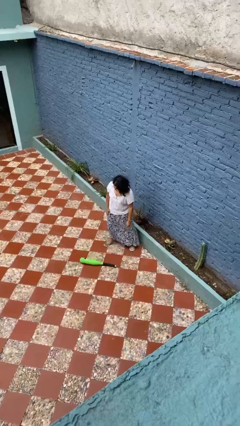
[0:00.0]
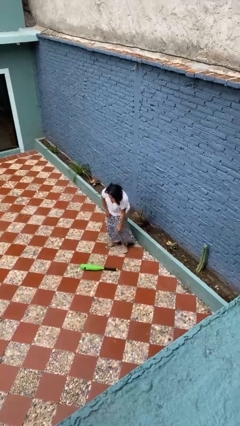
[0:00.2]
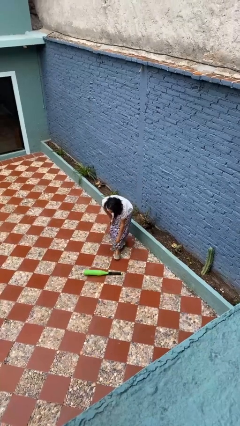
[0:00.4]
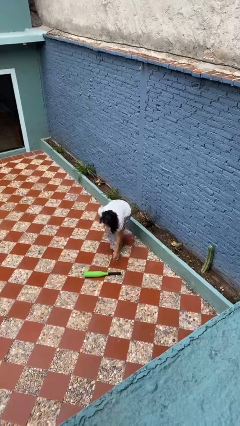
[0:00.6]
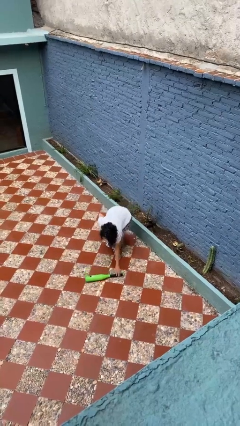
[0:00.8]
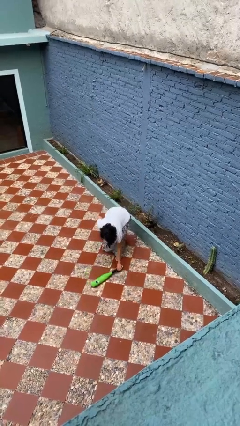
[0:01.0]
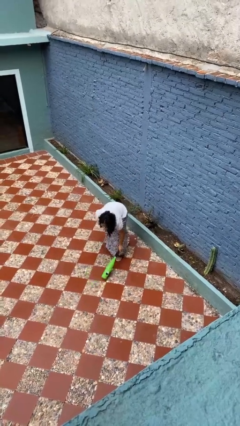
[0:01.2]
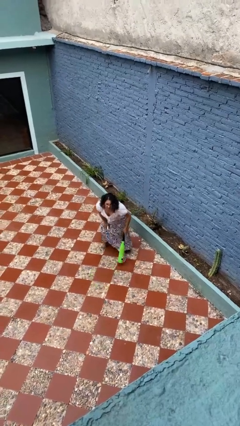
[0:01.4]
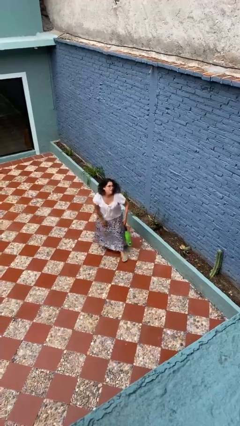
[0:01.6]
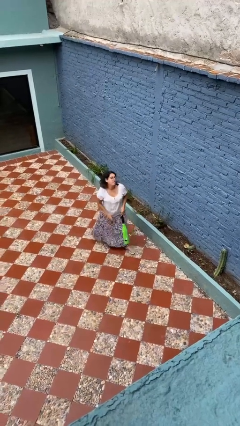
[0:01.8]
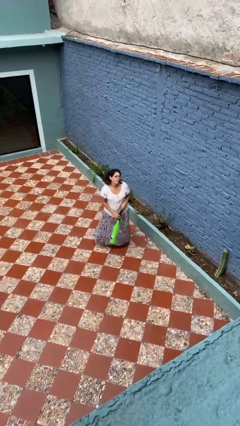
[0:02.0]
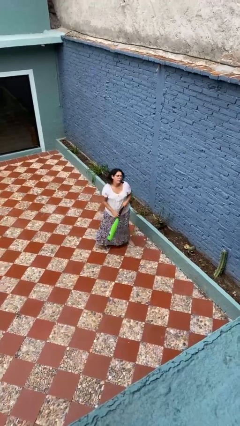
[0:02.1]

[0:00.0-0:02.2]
person picks up object from floor

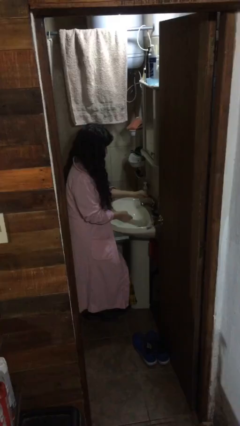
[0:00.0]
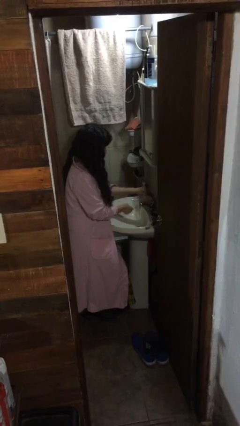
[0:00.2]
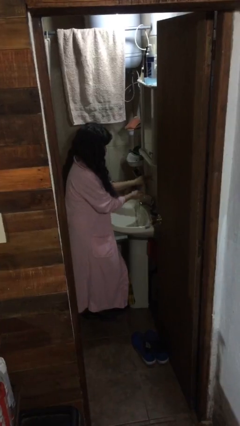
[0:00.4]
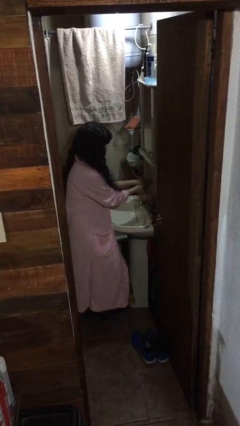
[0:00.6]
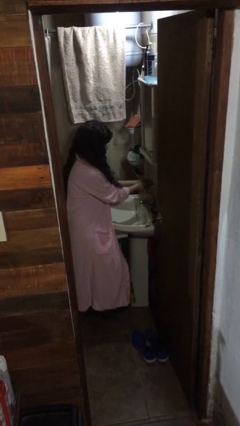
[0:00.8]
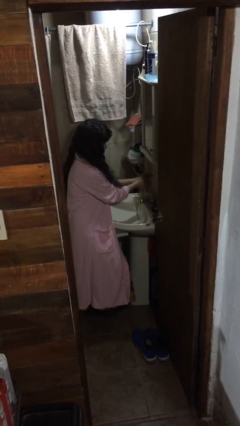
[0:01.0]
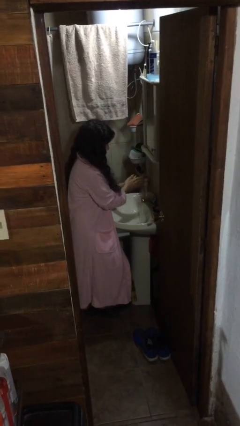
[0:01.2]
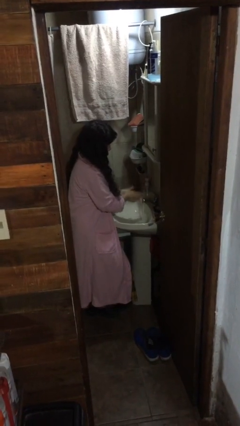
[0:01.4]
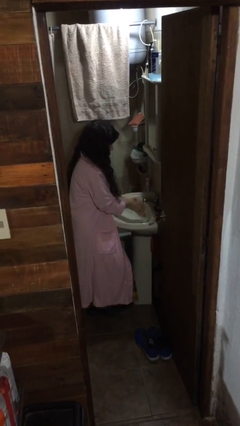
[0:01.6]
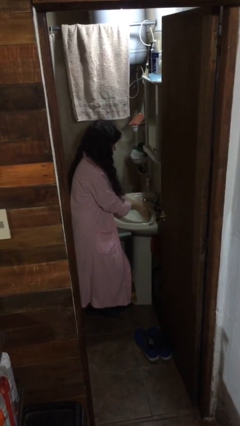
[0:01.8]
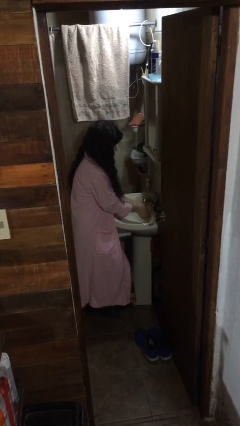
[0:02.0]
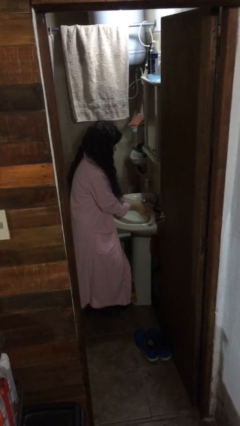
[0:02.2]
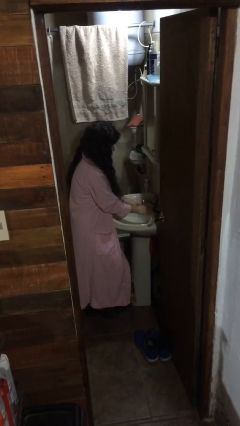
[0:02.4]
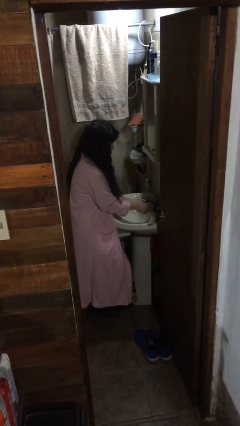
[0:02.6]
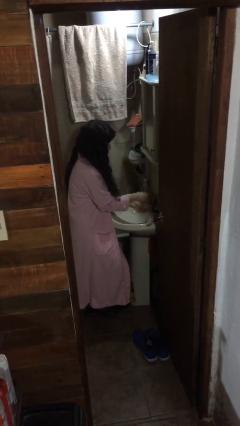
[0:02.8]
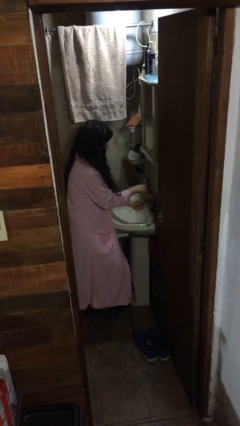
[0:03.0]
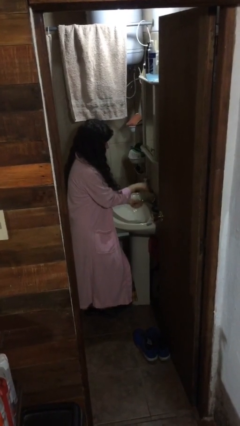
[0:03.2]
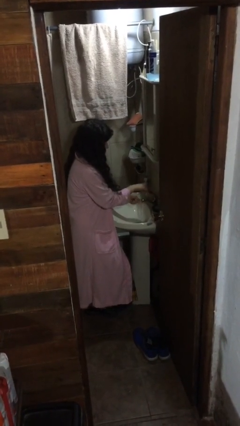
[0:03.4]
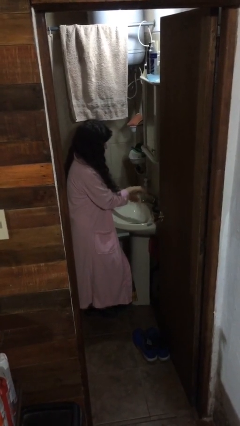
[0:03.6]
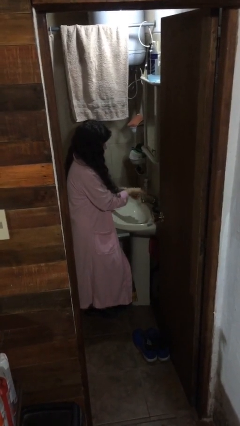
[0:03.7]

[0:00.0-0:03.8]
person washes hands

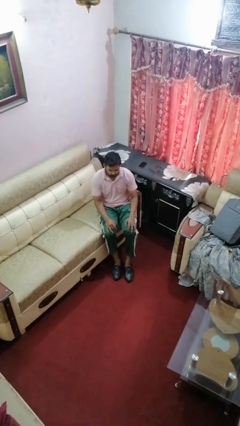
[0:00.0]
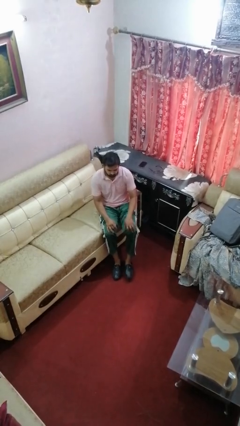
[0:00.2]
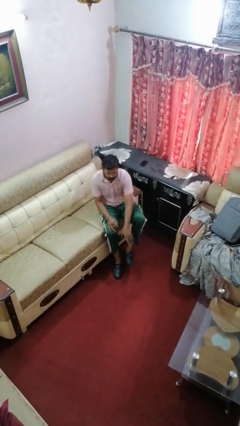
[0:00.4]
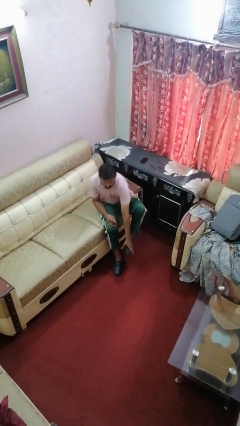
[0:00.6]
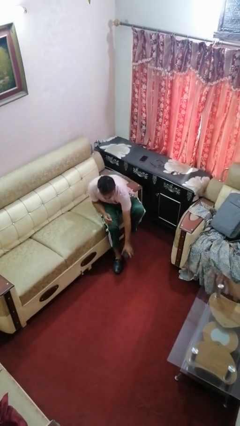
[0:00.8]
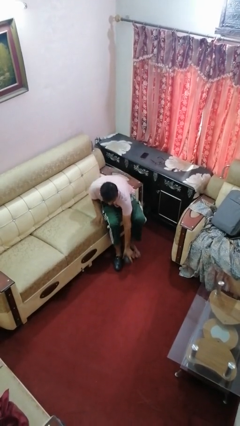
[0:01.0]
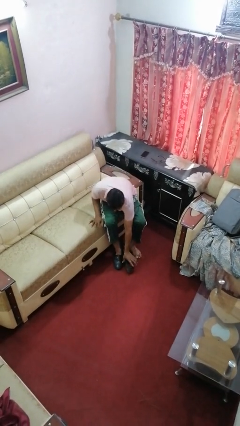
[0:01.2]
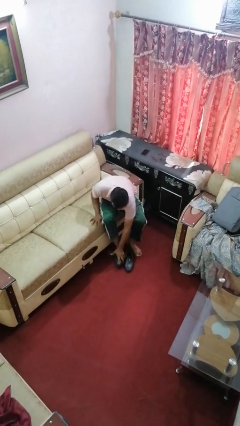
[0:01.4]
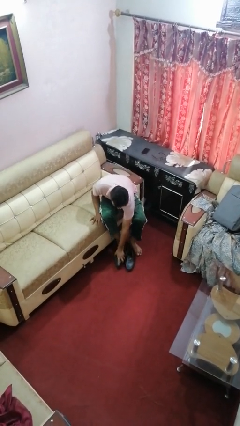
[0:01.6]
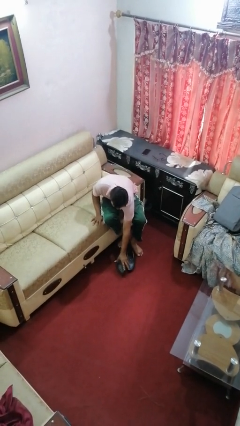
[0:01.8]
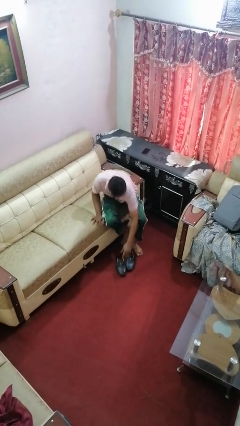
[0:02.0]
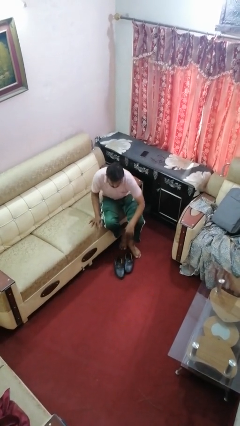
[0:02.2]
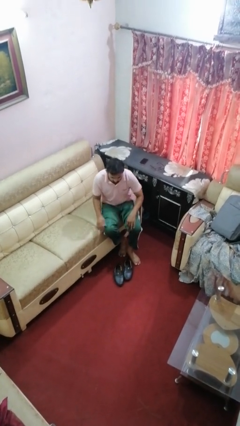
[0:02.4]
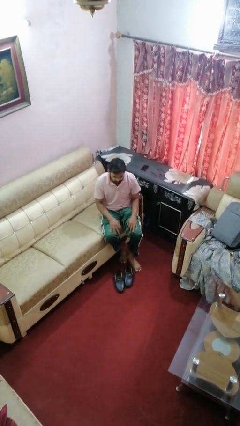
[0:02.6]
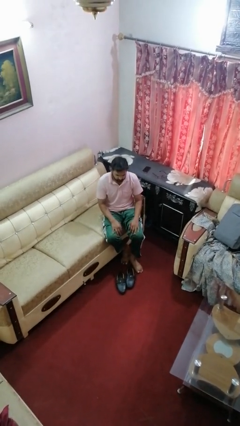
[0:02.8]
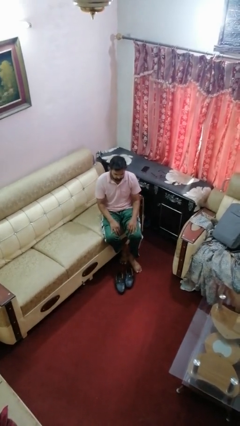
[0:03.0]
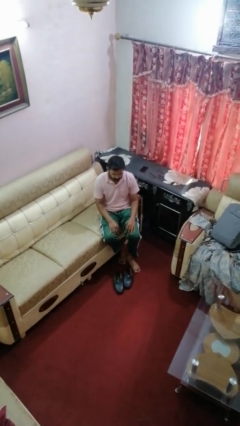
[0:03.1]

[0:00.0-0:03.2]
person takes off shoes

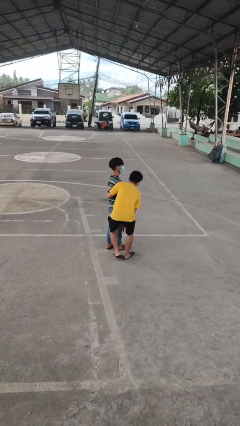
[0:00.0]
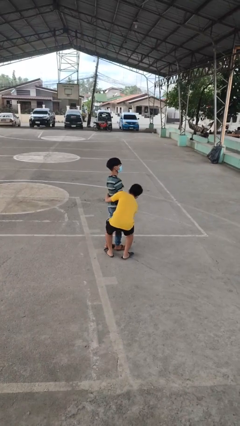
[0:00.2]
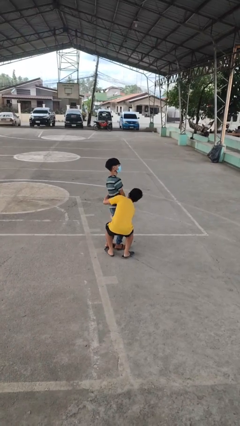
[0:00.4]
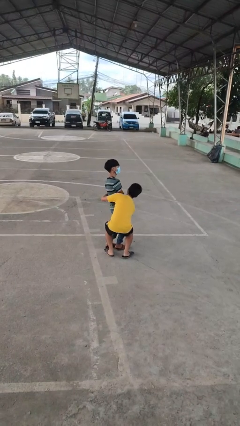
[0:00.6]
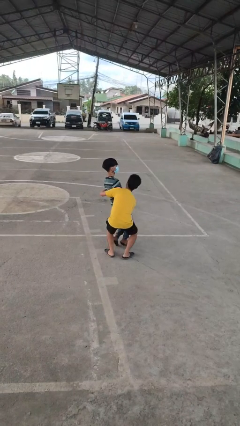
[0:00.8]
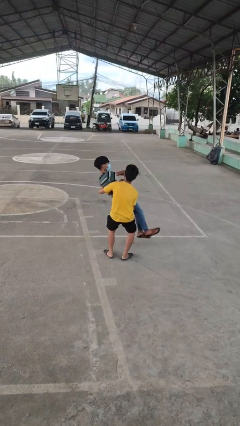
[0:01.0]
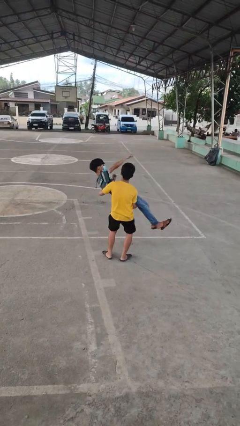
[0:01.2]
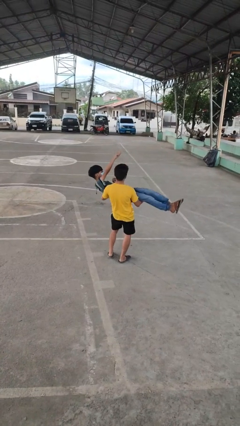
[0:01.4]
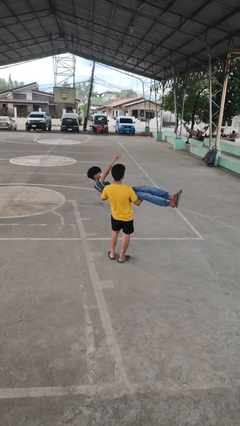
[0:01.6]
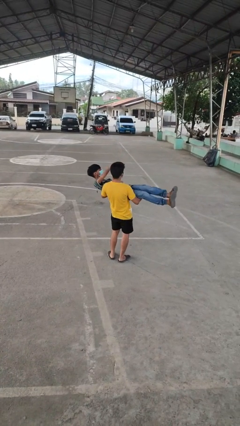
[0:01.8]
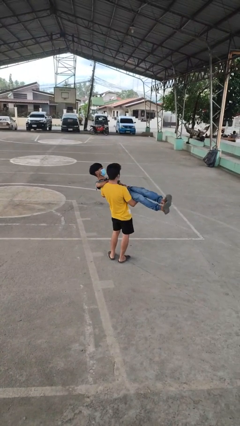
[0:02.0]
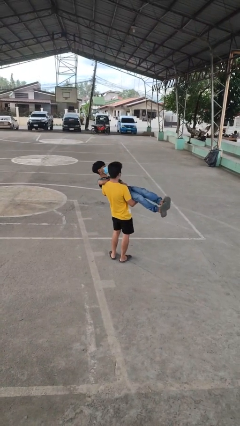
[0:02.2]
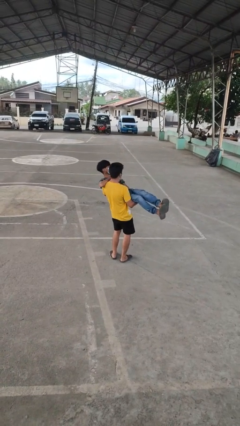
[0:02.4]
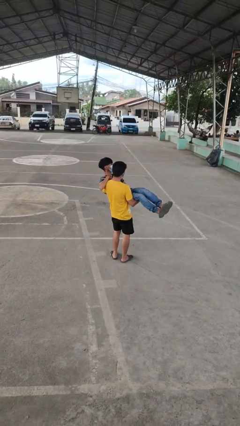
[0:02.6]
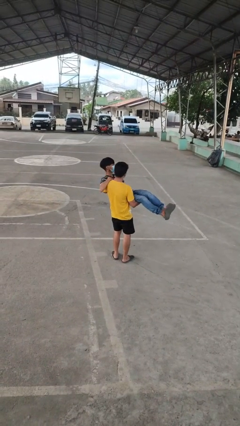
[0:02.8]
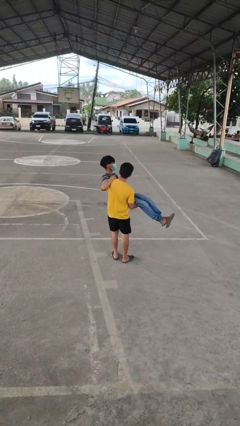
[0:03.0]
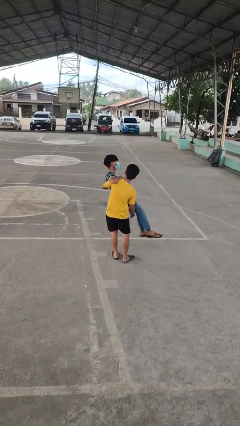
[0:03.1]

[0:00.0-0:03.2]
person picks up person

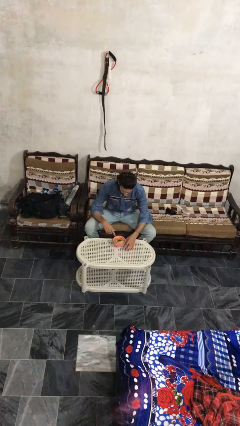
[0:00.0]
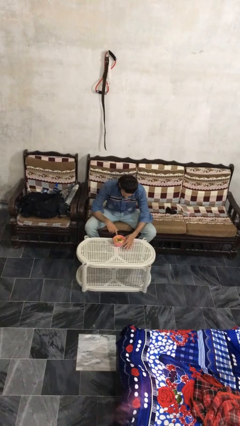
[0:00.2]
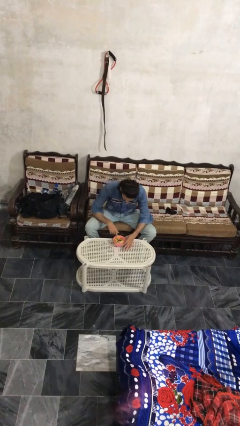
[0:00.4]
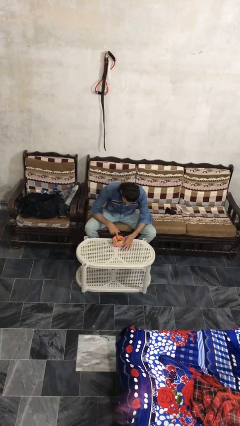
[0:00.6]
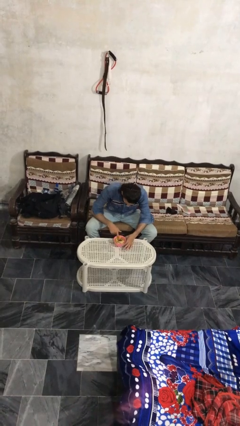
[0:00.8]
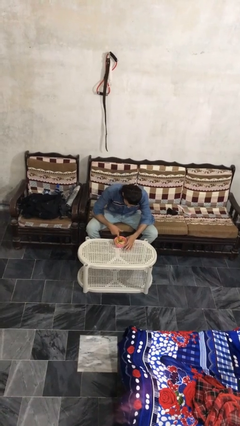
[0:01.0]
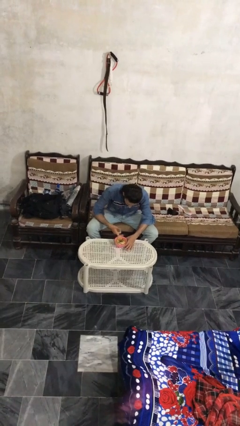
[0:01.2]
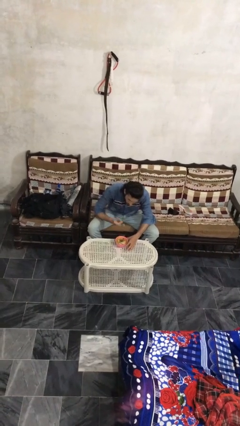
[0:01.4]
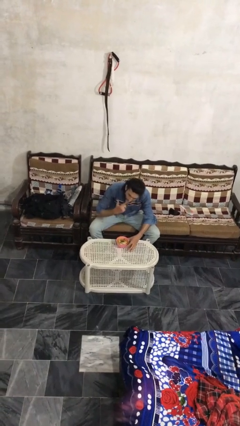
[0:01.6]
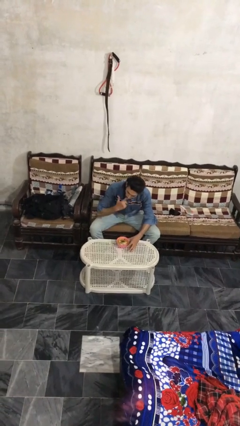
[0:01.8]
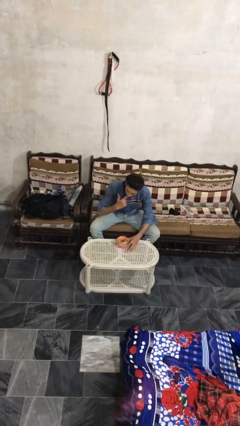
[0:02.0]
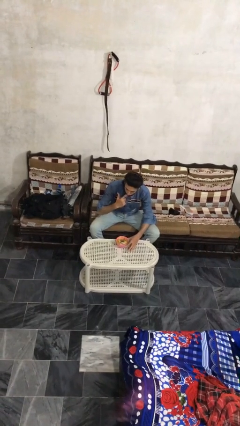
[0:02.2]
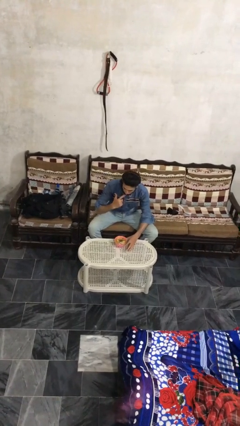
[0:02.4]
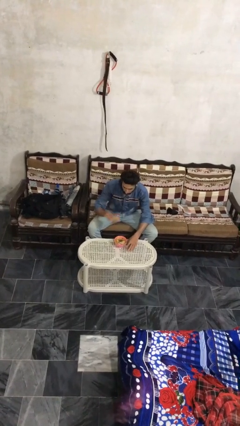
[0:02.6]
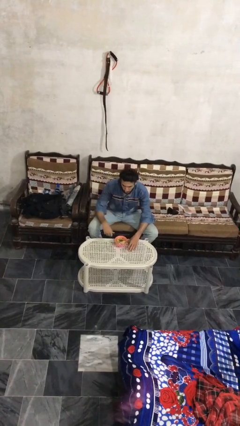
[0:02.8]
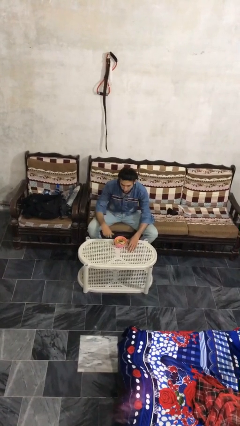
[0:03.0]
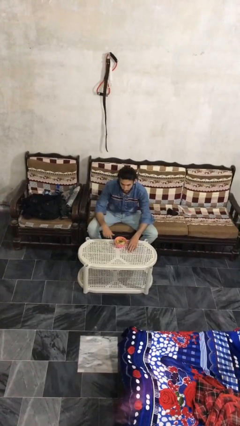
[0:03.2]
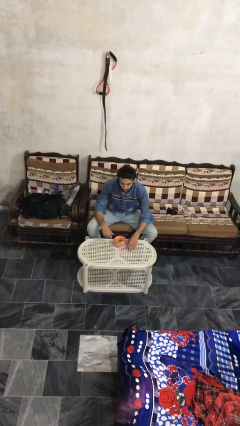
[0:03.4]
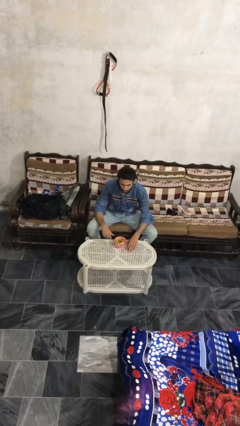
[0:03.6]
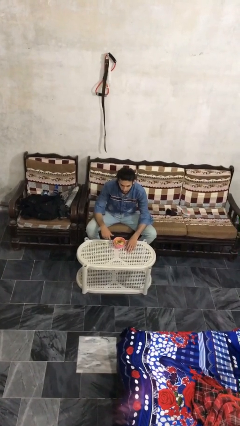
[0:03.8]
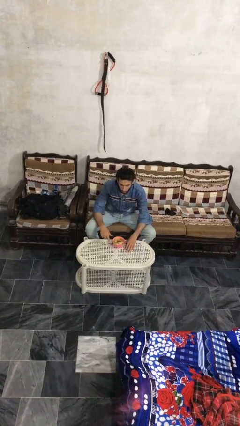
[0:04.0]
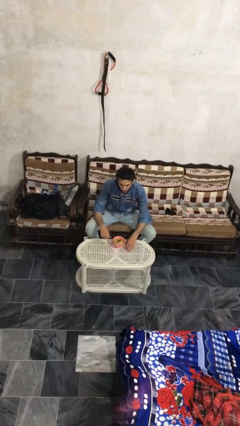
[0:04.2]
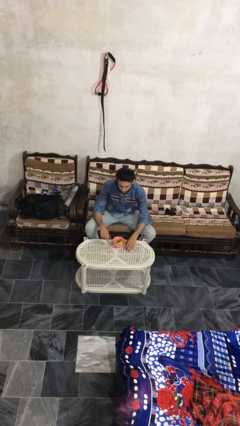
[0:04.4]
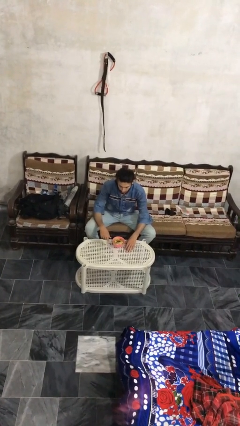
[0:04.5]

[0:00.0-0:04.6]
person eats with hands

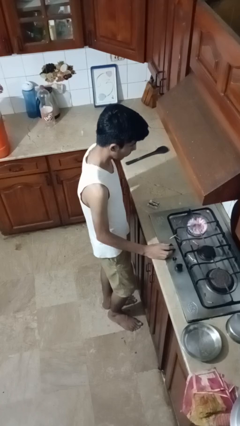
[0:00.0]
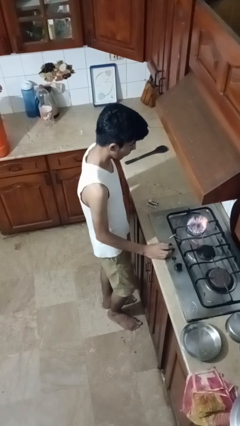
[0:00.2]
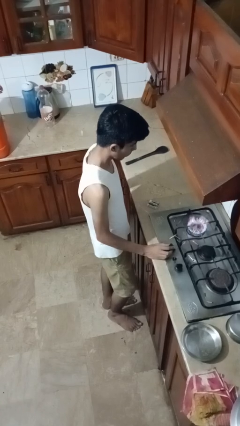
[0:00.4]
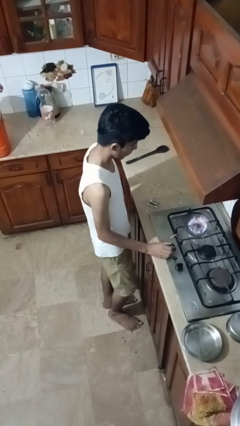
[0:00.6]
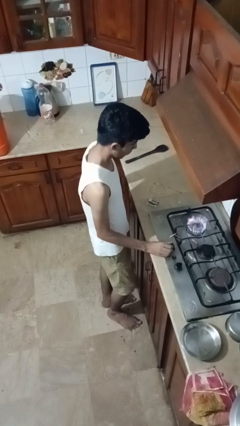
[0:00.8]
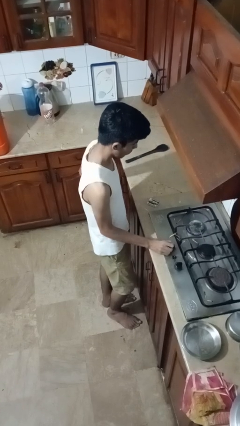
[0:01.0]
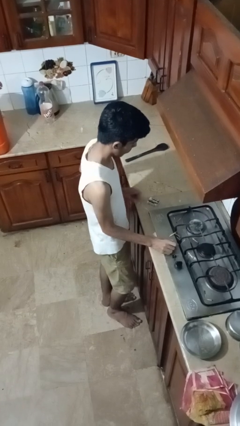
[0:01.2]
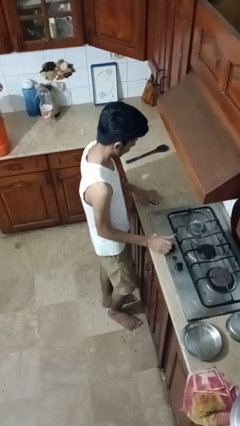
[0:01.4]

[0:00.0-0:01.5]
person turns off stovetop
